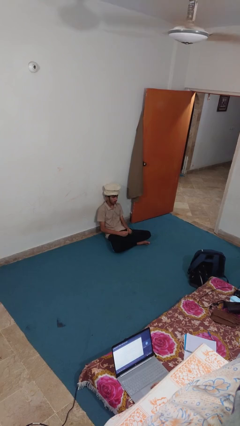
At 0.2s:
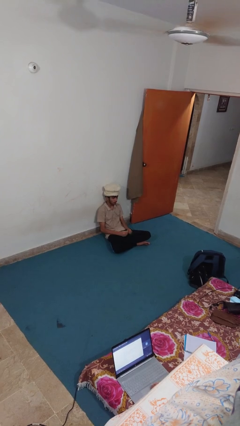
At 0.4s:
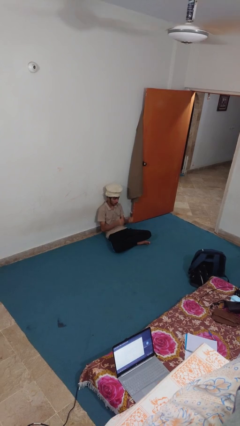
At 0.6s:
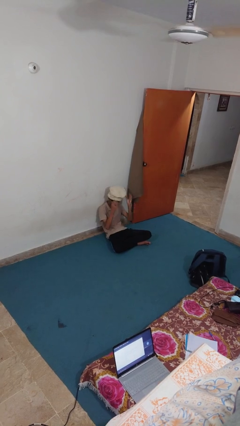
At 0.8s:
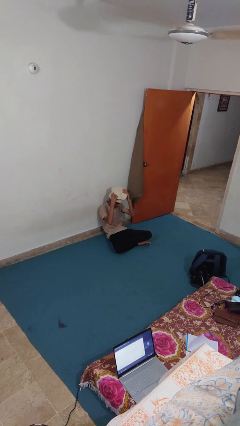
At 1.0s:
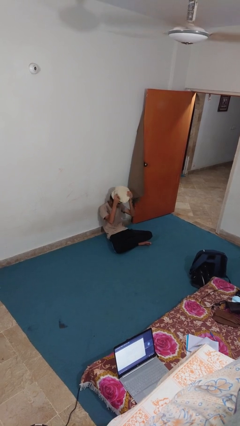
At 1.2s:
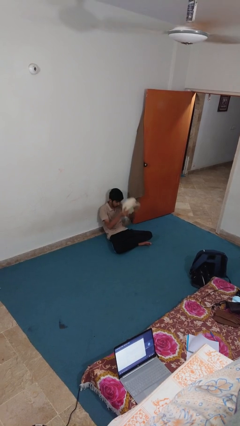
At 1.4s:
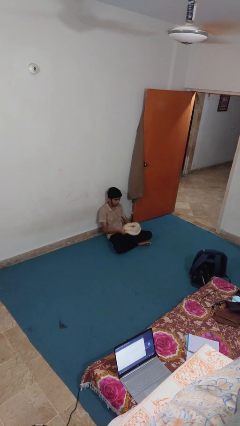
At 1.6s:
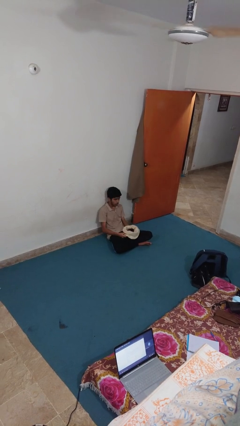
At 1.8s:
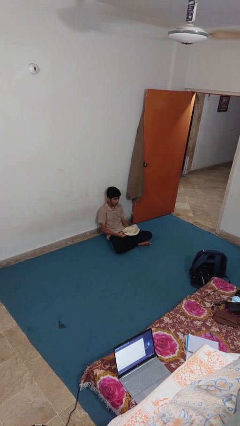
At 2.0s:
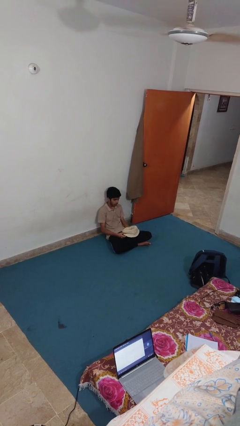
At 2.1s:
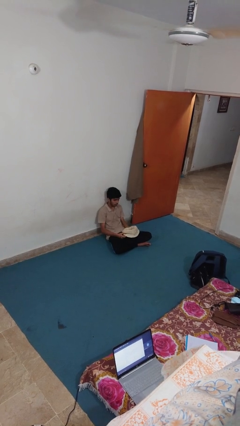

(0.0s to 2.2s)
person takes off hat

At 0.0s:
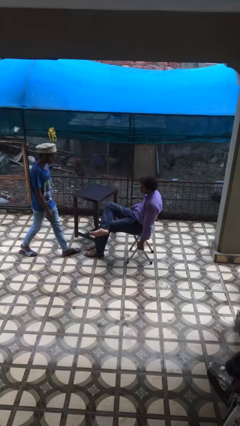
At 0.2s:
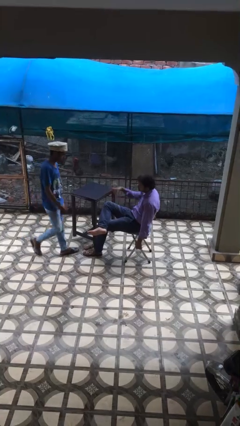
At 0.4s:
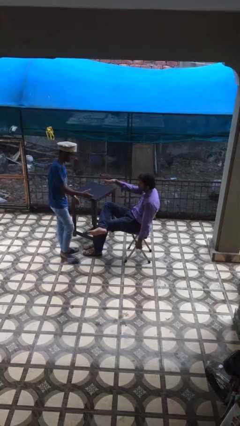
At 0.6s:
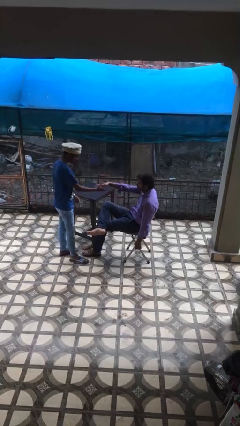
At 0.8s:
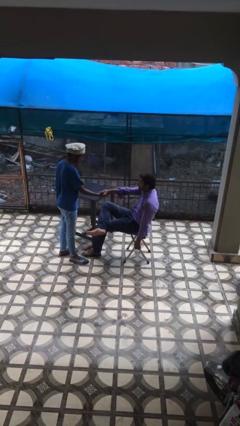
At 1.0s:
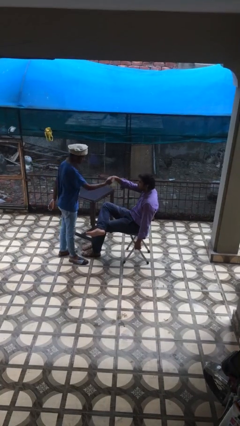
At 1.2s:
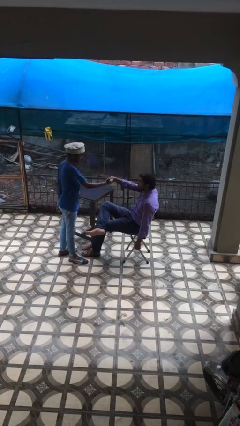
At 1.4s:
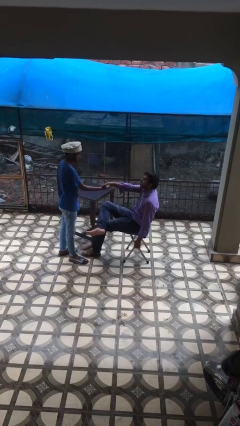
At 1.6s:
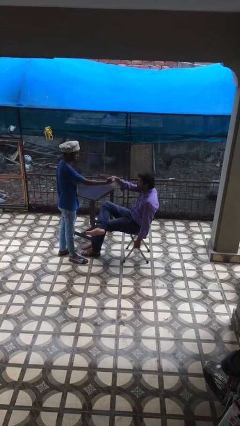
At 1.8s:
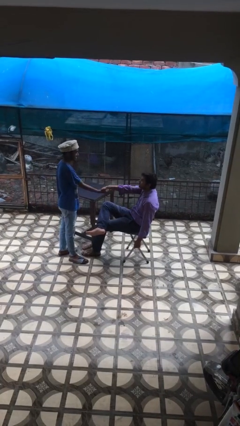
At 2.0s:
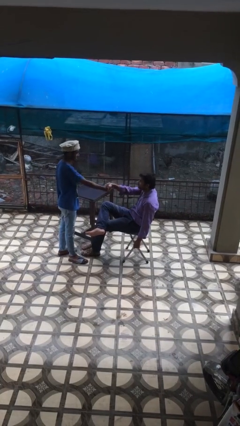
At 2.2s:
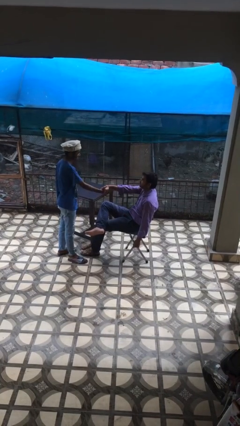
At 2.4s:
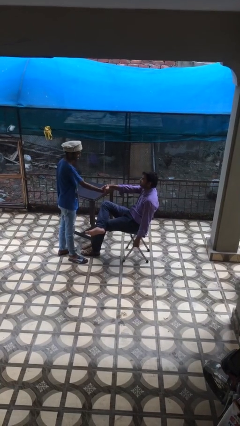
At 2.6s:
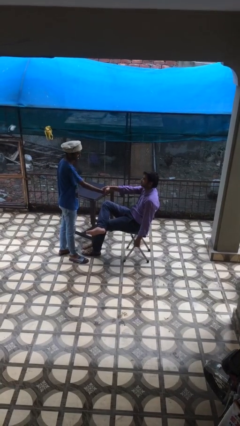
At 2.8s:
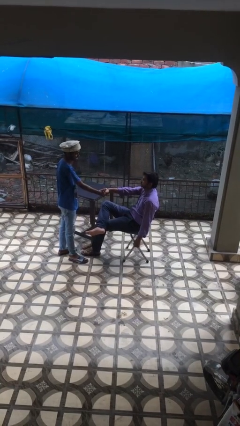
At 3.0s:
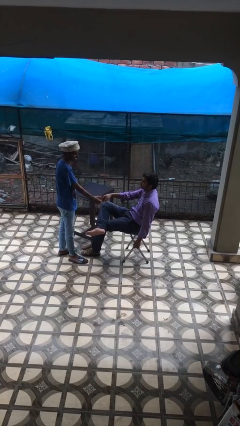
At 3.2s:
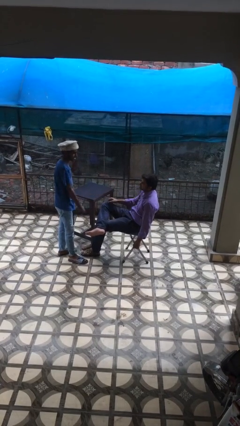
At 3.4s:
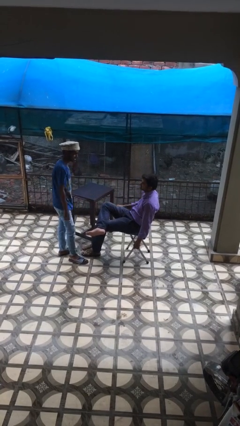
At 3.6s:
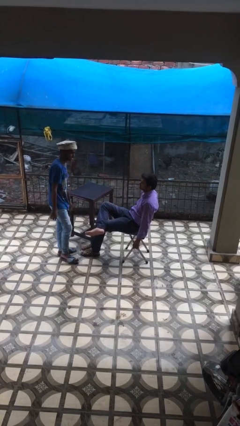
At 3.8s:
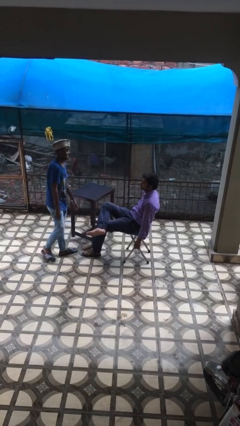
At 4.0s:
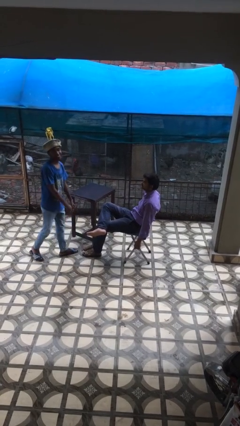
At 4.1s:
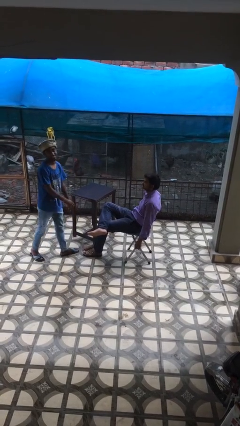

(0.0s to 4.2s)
person shakes hand

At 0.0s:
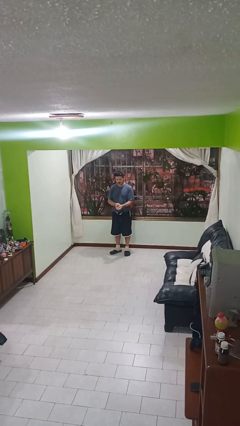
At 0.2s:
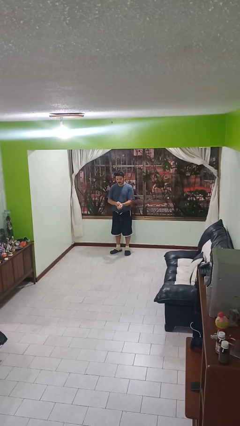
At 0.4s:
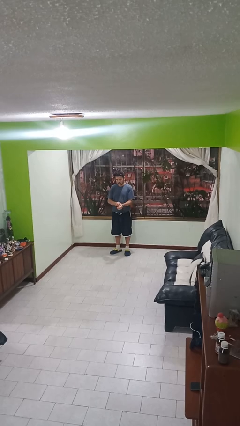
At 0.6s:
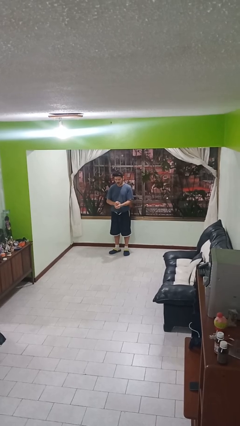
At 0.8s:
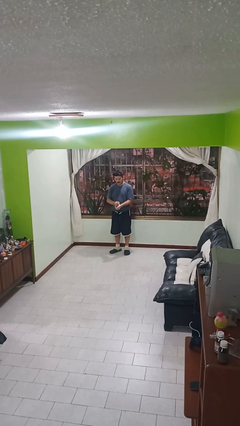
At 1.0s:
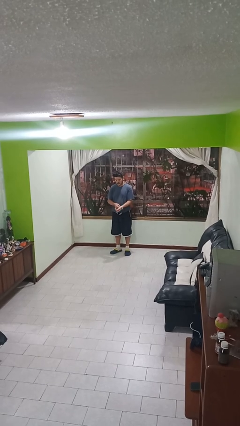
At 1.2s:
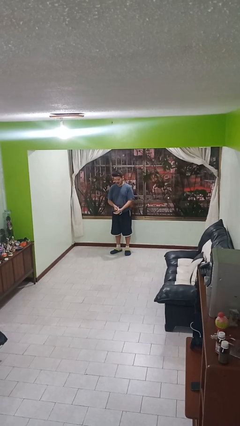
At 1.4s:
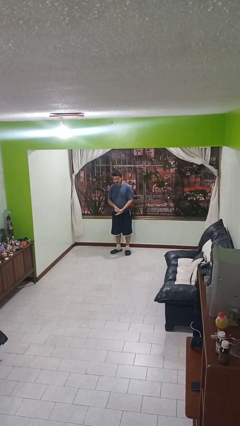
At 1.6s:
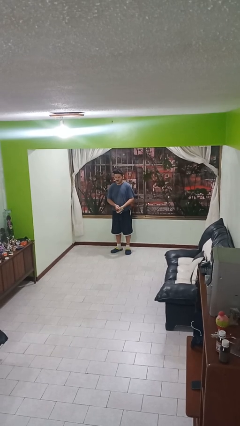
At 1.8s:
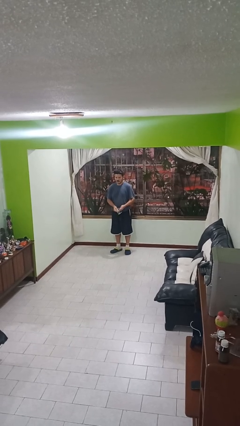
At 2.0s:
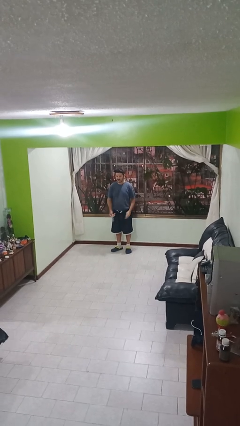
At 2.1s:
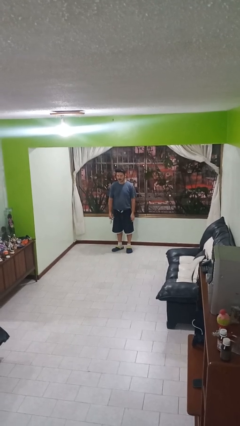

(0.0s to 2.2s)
person takes off wristwatch

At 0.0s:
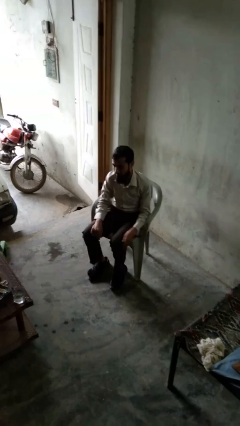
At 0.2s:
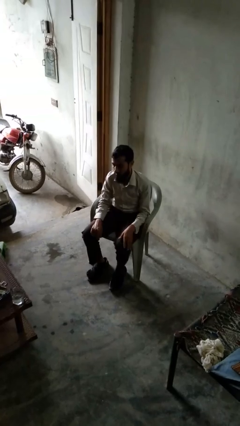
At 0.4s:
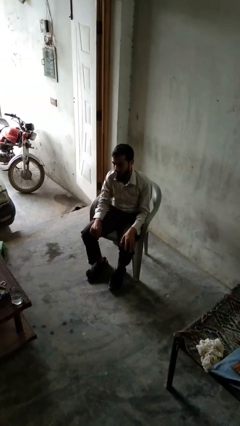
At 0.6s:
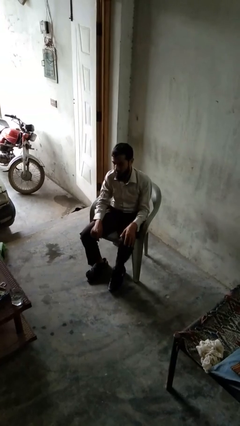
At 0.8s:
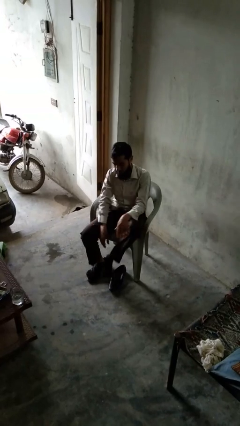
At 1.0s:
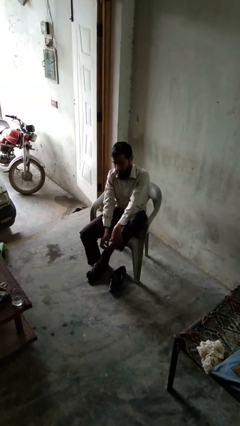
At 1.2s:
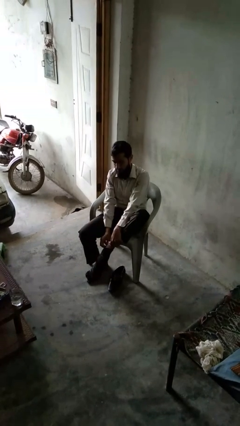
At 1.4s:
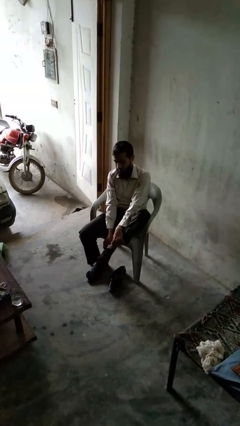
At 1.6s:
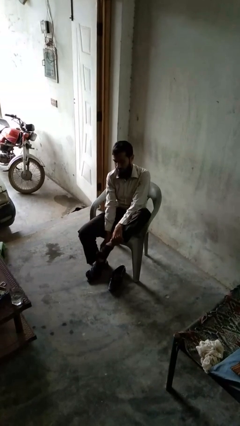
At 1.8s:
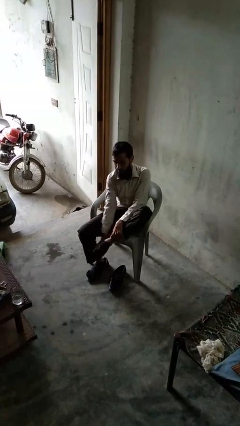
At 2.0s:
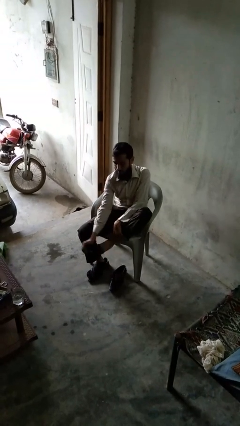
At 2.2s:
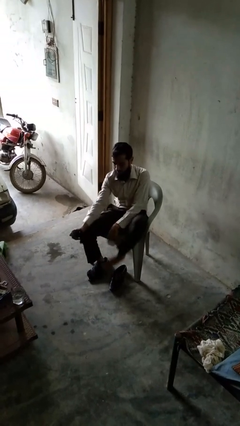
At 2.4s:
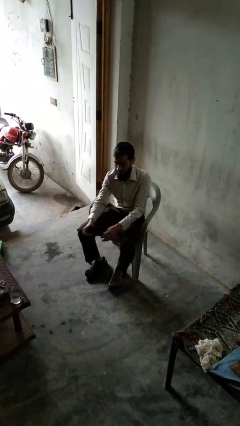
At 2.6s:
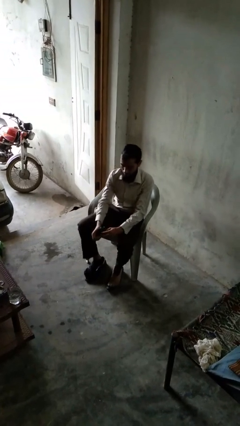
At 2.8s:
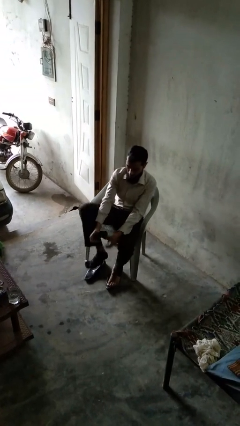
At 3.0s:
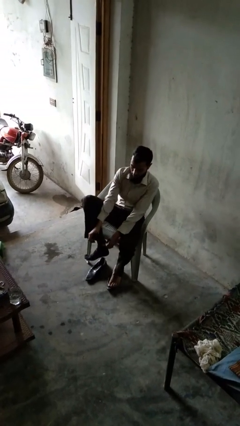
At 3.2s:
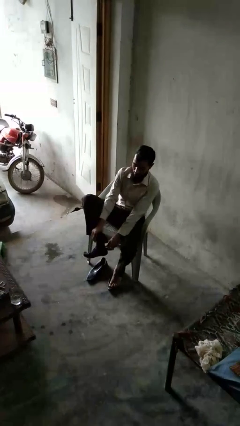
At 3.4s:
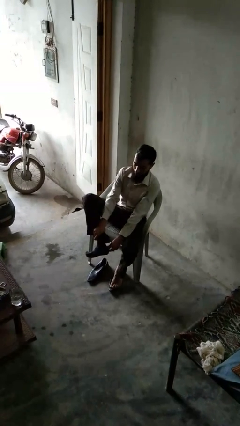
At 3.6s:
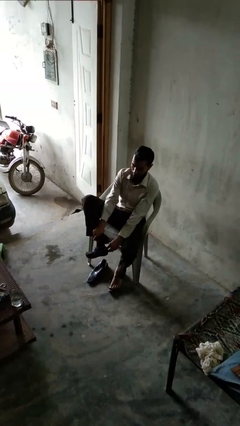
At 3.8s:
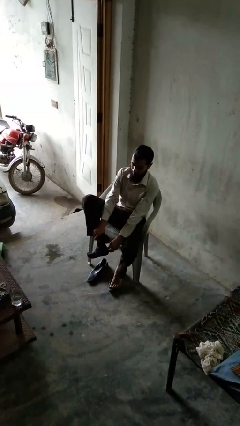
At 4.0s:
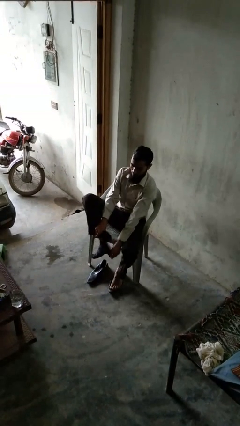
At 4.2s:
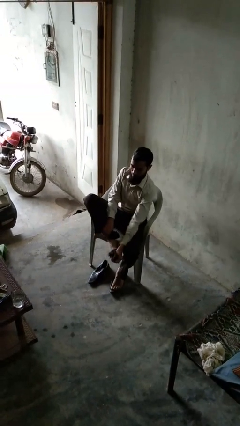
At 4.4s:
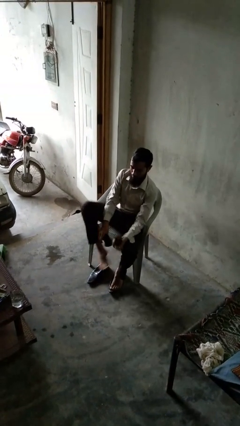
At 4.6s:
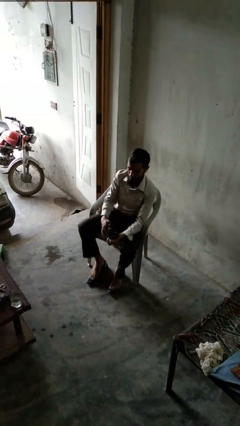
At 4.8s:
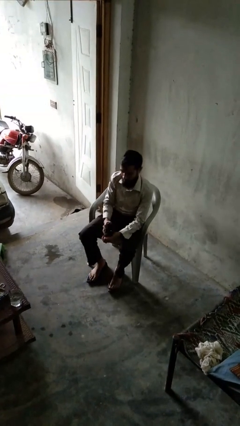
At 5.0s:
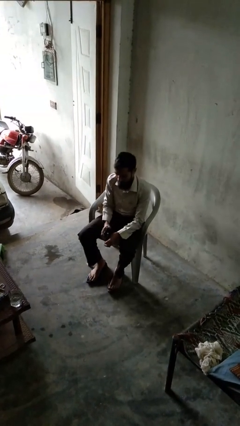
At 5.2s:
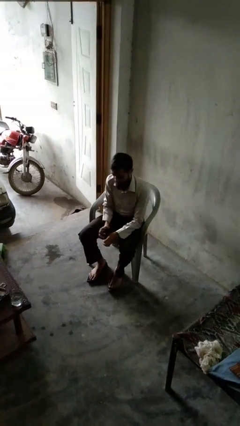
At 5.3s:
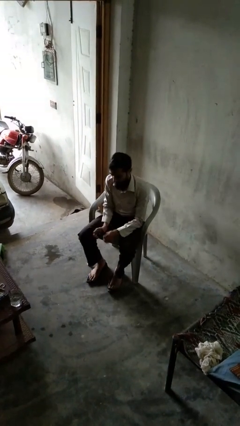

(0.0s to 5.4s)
person takes off socks

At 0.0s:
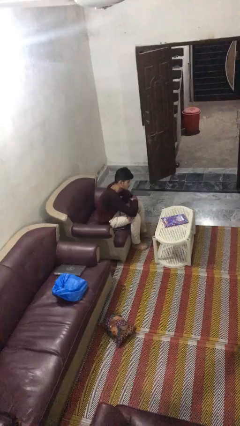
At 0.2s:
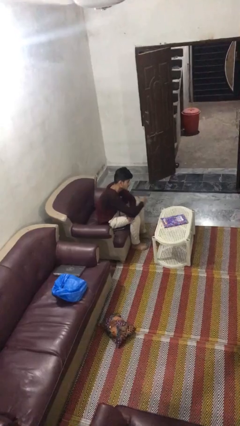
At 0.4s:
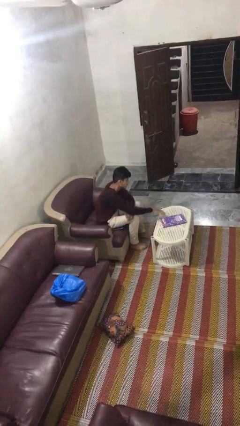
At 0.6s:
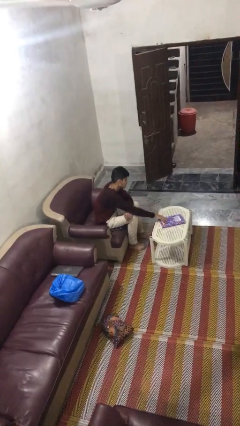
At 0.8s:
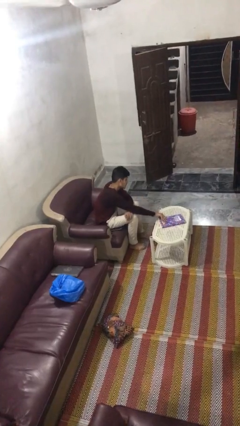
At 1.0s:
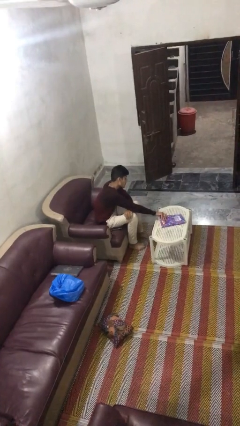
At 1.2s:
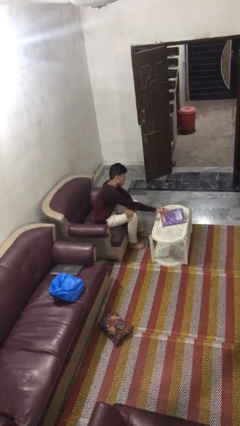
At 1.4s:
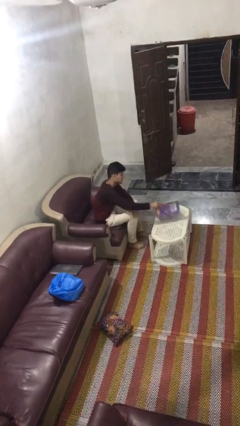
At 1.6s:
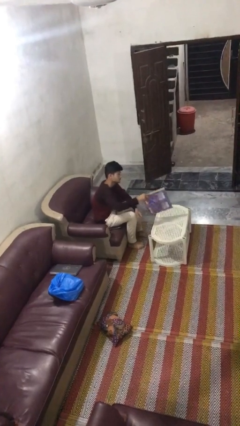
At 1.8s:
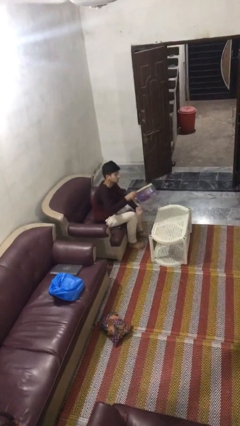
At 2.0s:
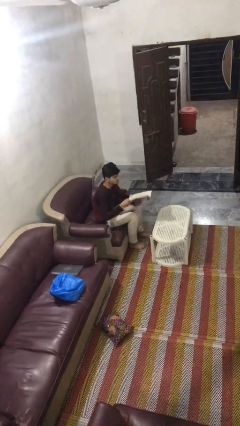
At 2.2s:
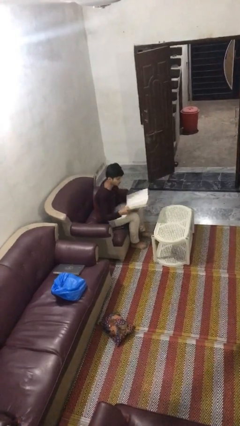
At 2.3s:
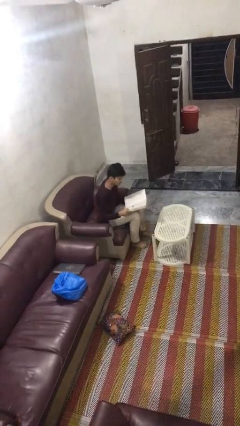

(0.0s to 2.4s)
person picks up object from table

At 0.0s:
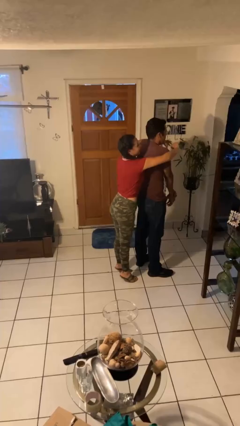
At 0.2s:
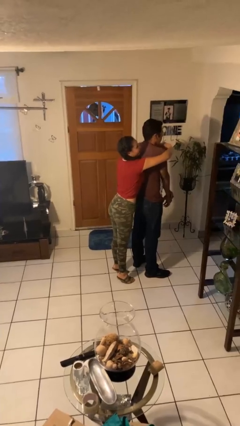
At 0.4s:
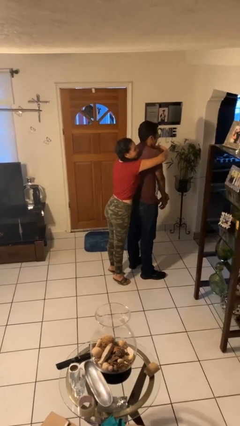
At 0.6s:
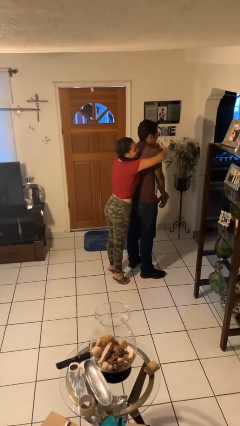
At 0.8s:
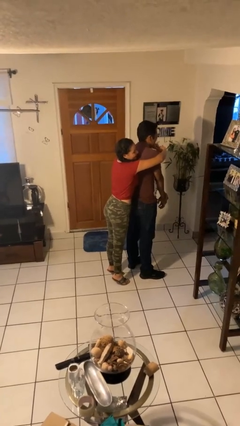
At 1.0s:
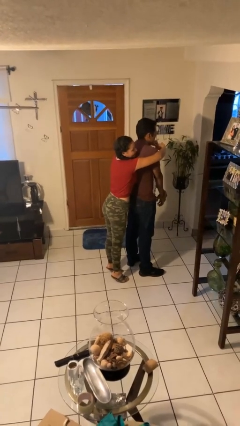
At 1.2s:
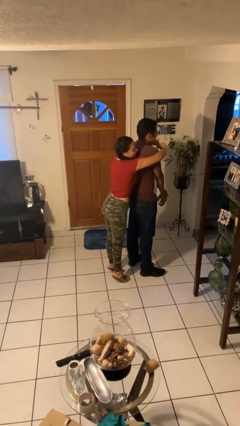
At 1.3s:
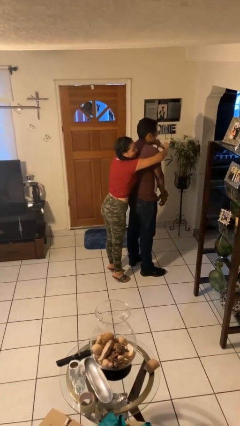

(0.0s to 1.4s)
person hugs person from behind
